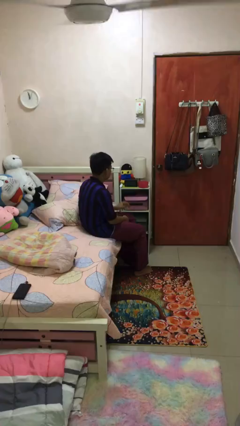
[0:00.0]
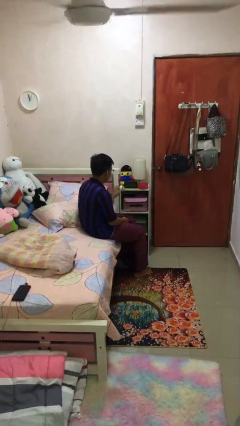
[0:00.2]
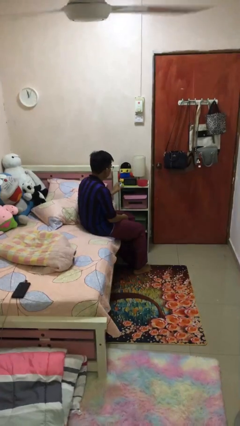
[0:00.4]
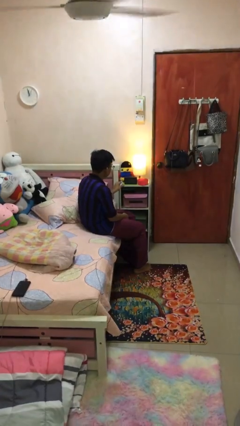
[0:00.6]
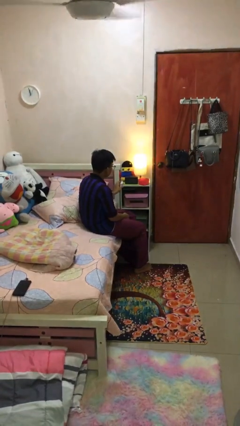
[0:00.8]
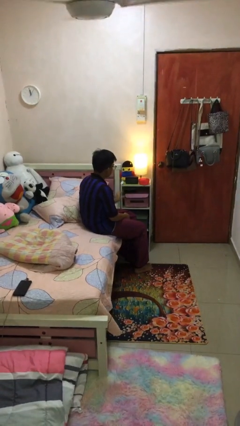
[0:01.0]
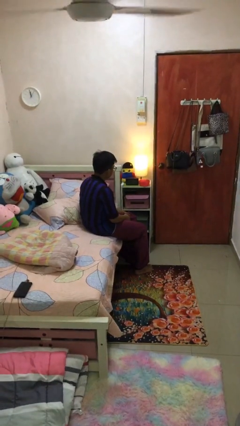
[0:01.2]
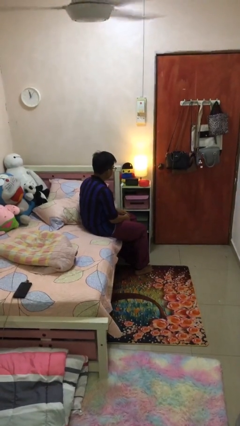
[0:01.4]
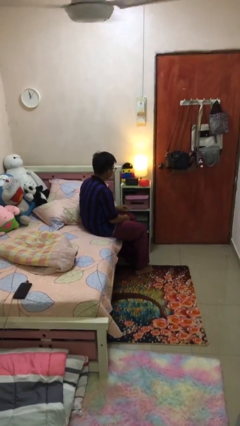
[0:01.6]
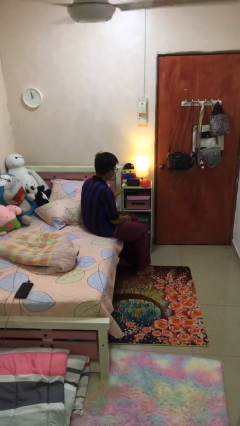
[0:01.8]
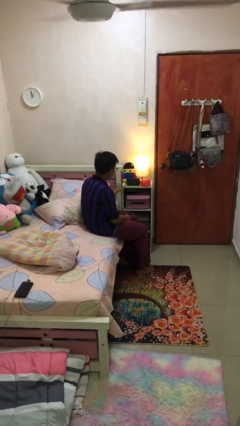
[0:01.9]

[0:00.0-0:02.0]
person turns on lamp

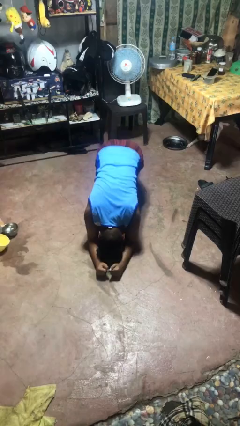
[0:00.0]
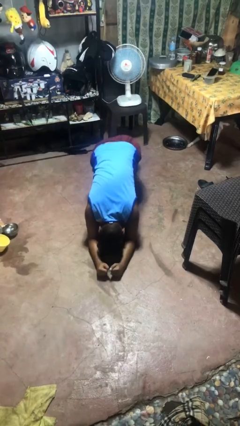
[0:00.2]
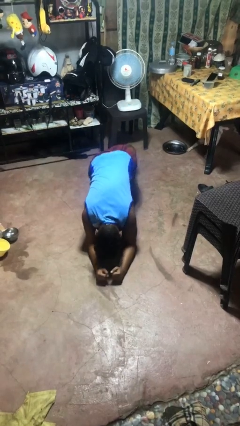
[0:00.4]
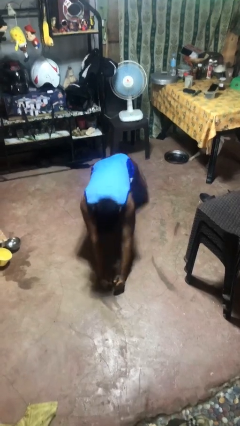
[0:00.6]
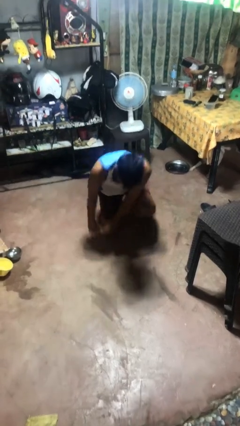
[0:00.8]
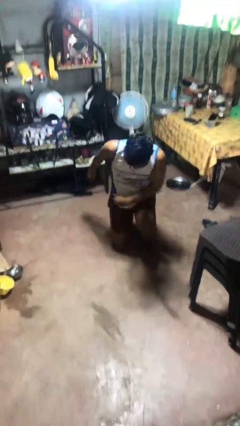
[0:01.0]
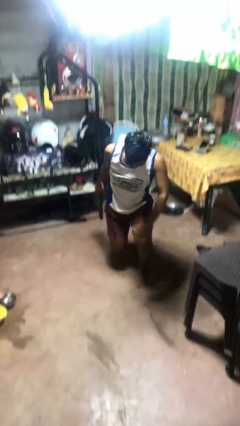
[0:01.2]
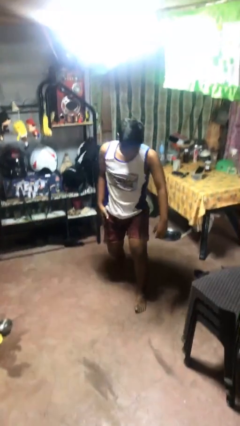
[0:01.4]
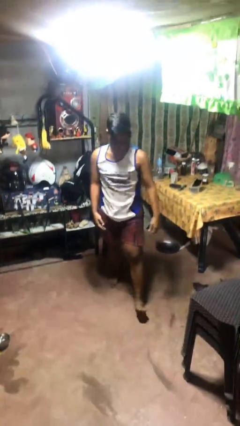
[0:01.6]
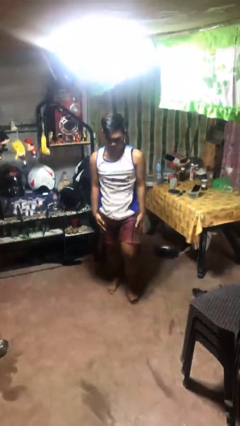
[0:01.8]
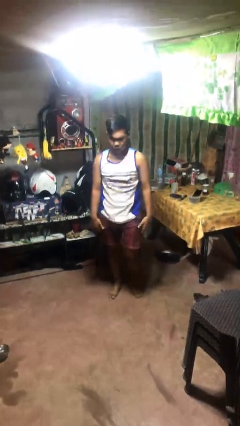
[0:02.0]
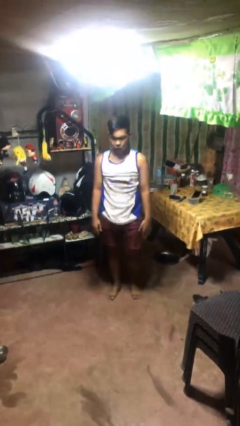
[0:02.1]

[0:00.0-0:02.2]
person stands up from floor

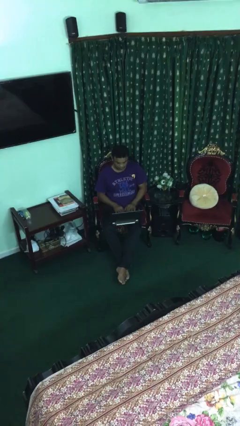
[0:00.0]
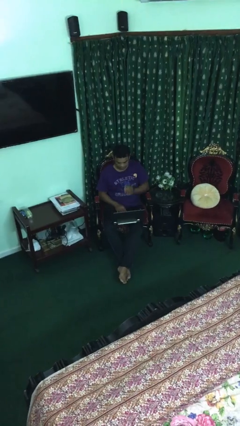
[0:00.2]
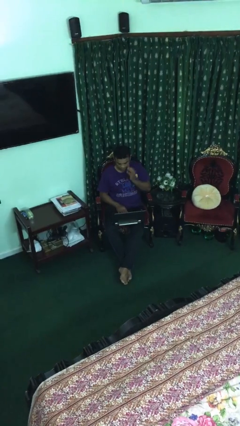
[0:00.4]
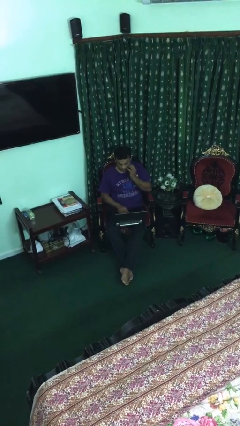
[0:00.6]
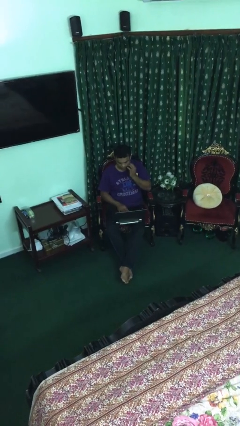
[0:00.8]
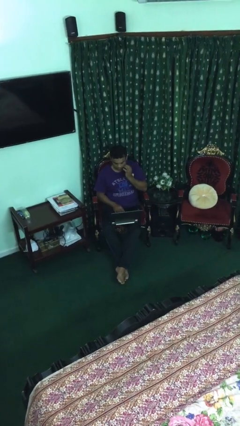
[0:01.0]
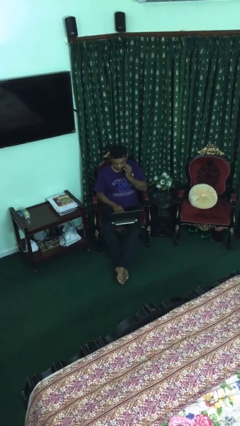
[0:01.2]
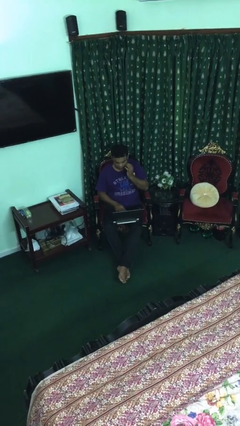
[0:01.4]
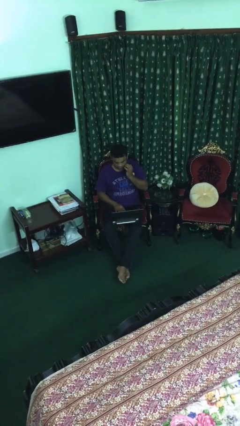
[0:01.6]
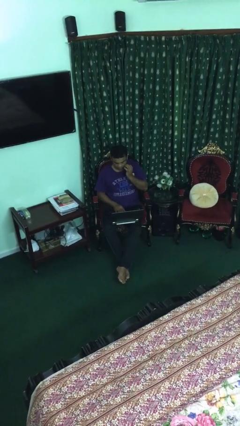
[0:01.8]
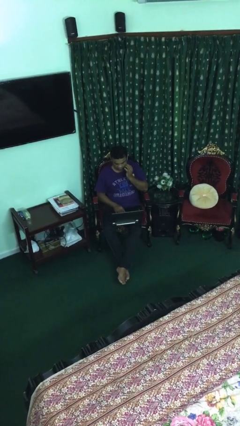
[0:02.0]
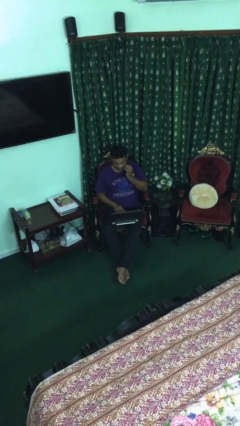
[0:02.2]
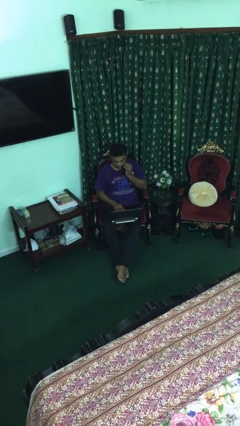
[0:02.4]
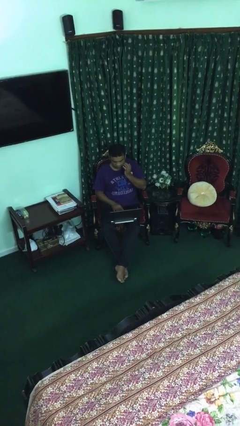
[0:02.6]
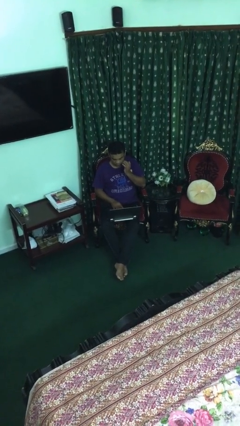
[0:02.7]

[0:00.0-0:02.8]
person interacts with laptop

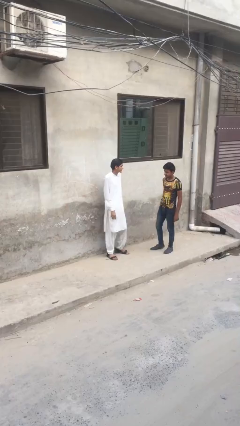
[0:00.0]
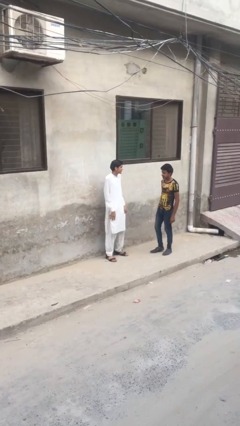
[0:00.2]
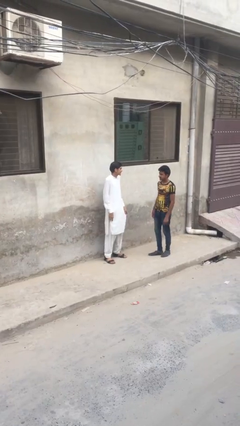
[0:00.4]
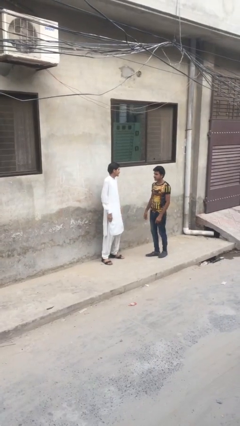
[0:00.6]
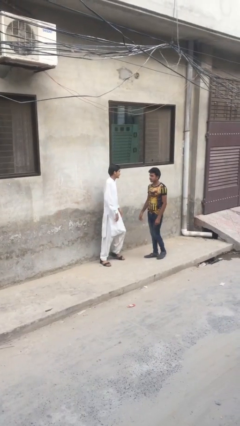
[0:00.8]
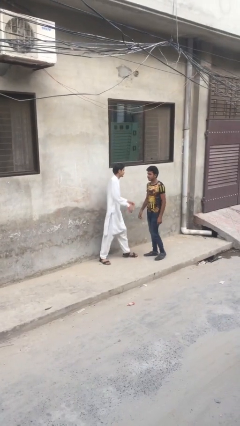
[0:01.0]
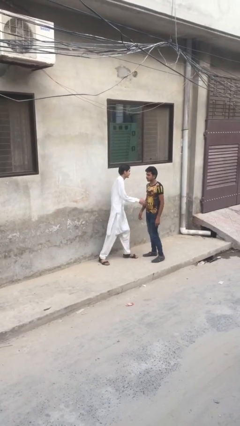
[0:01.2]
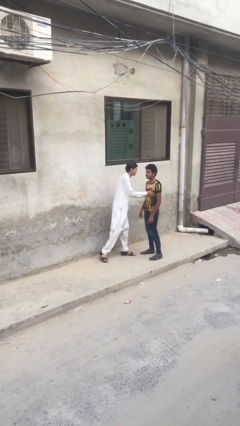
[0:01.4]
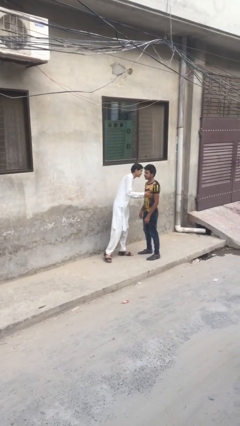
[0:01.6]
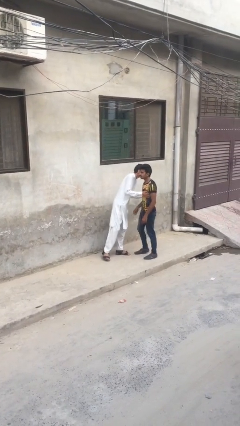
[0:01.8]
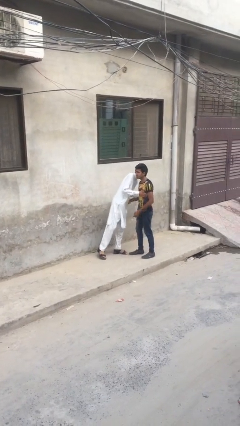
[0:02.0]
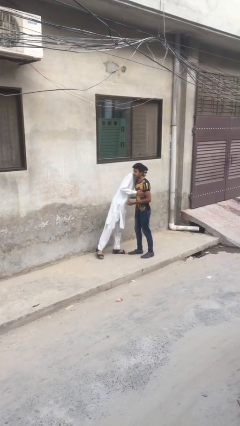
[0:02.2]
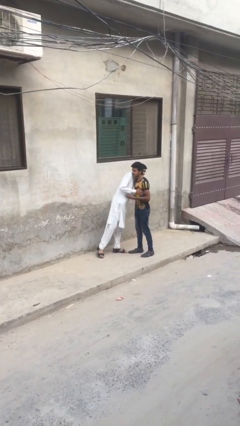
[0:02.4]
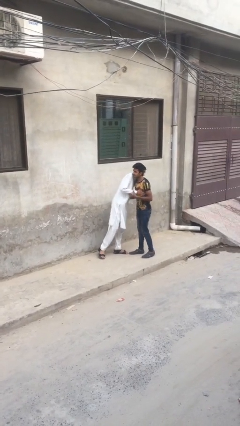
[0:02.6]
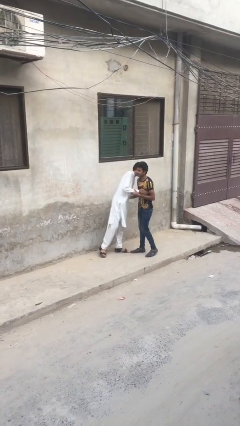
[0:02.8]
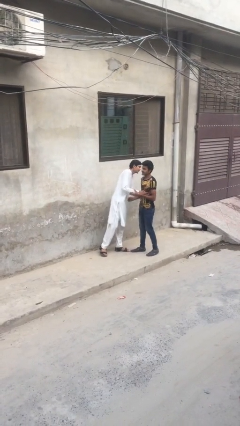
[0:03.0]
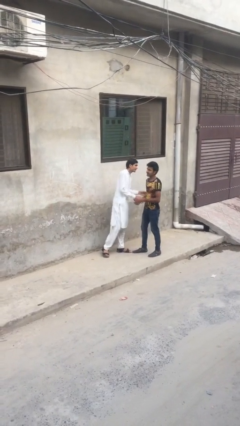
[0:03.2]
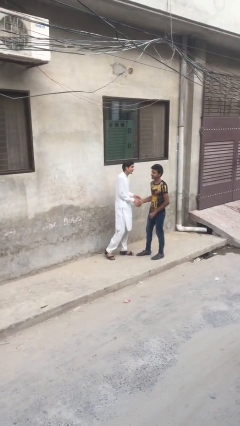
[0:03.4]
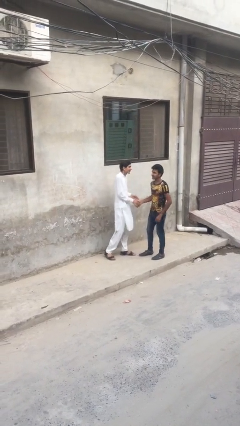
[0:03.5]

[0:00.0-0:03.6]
person embraces person

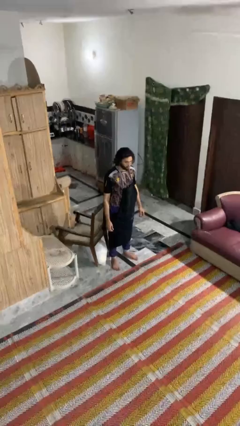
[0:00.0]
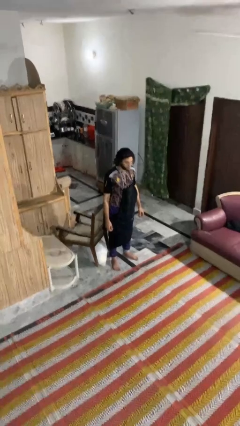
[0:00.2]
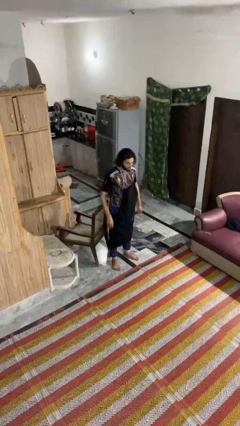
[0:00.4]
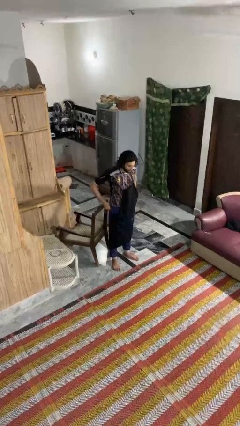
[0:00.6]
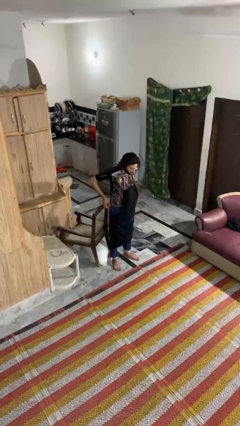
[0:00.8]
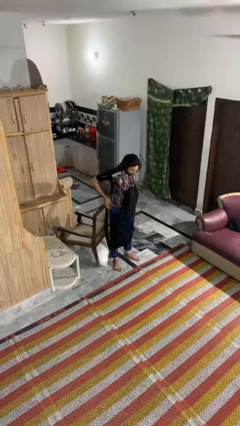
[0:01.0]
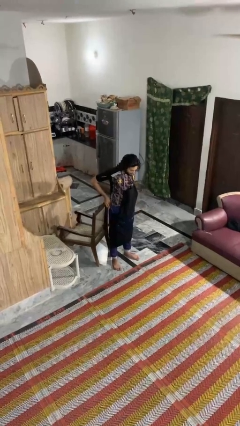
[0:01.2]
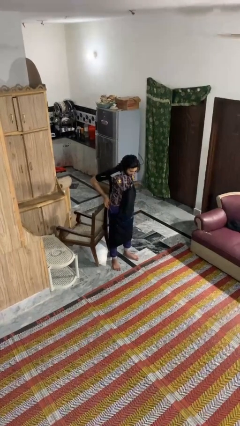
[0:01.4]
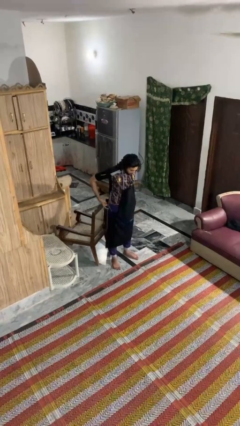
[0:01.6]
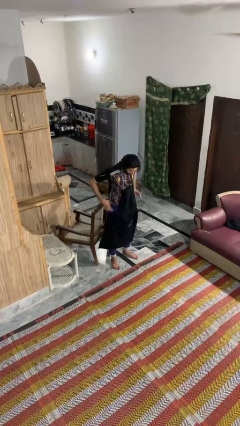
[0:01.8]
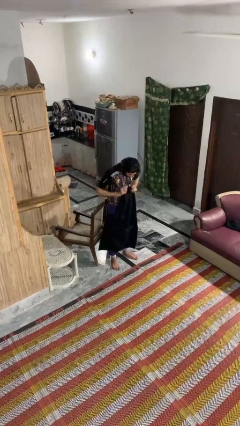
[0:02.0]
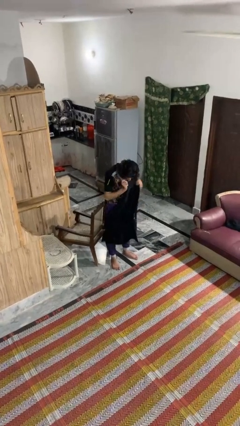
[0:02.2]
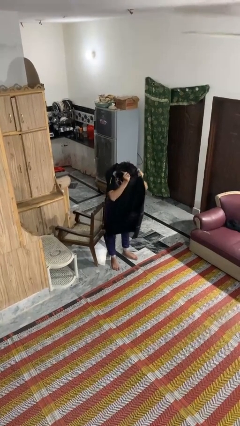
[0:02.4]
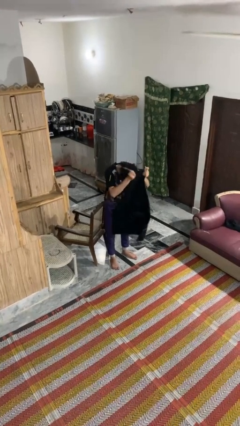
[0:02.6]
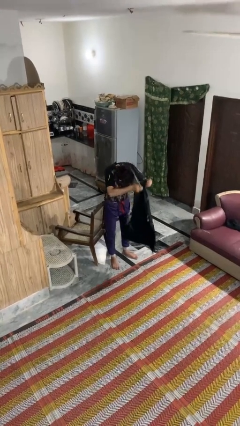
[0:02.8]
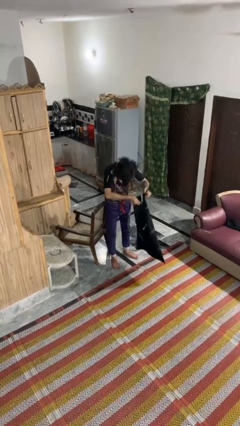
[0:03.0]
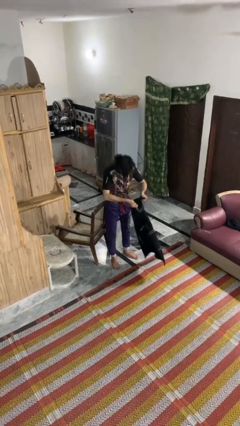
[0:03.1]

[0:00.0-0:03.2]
person takes off apron

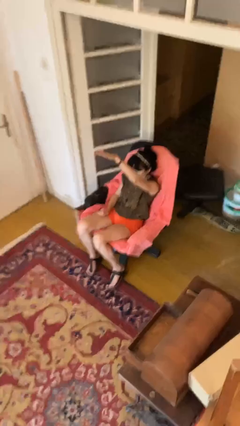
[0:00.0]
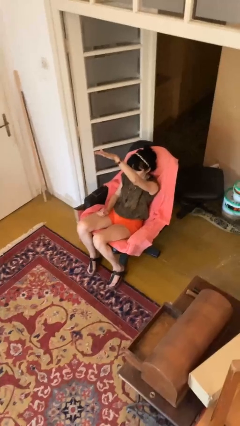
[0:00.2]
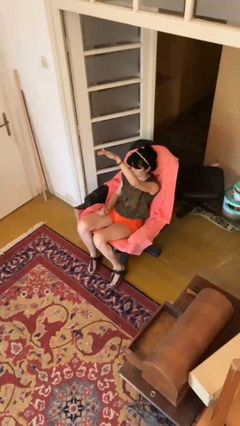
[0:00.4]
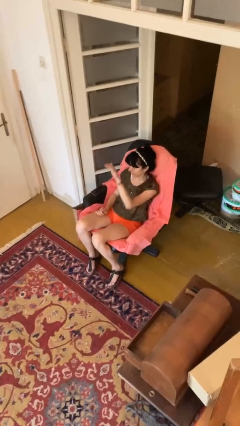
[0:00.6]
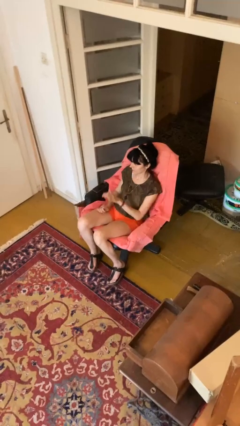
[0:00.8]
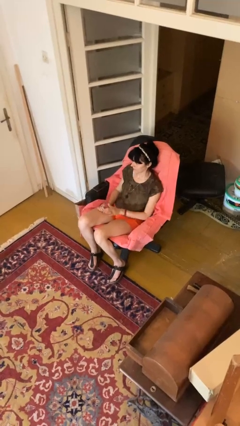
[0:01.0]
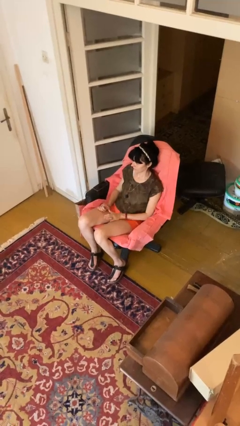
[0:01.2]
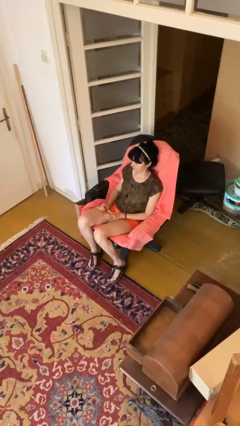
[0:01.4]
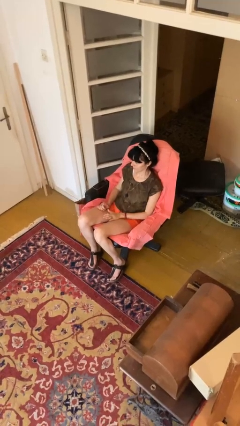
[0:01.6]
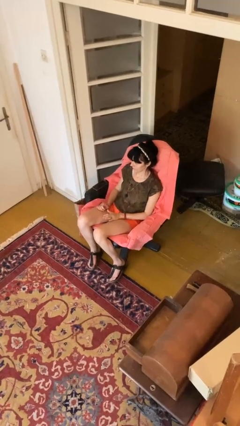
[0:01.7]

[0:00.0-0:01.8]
person gestures swipe down

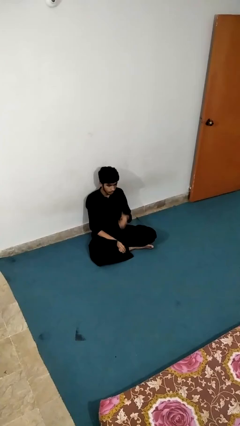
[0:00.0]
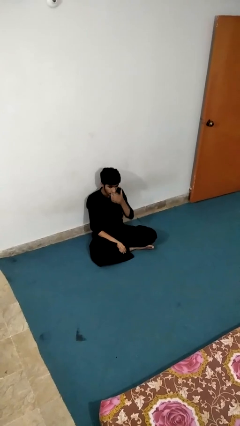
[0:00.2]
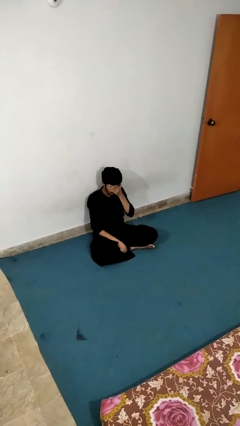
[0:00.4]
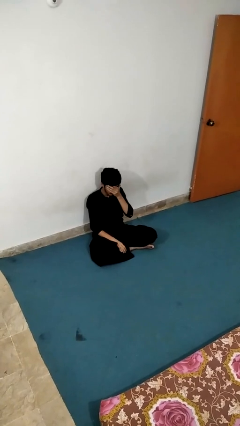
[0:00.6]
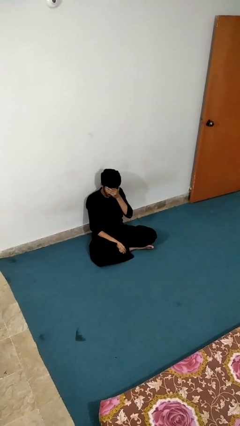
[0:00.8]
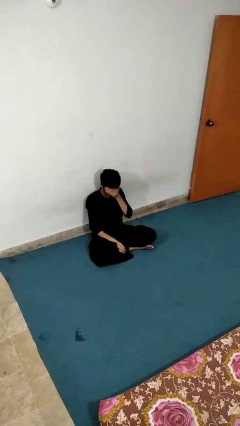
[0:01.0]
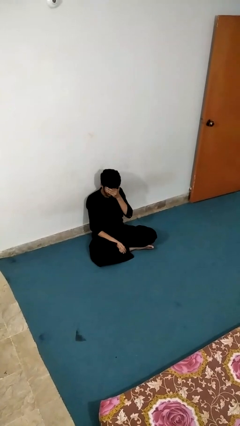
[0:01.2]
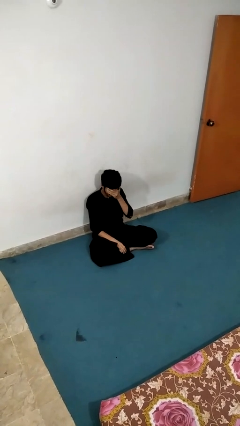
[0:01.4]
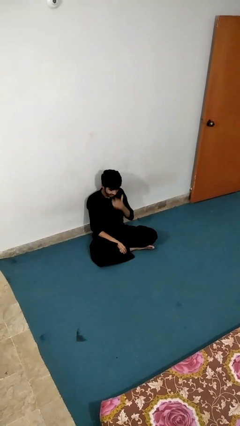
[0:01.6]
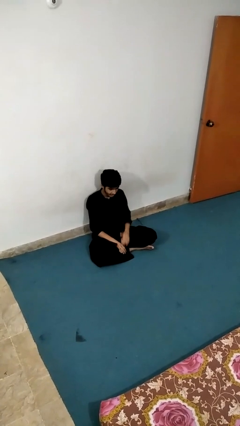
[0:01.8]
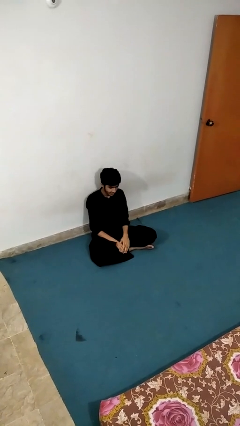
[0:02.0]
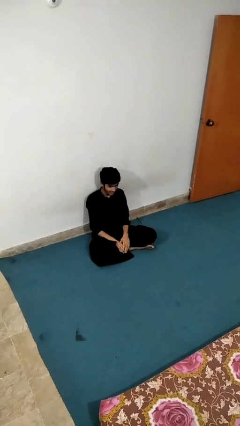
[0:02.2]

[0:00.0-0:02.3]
person covers face with hands
